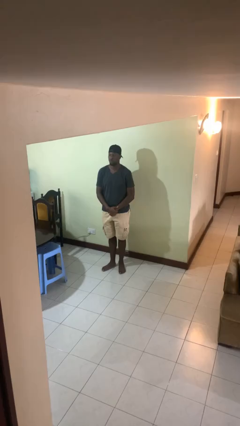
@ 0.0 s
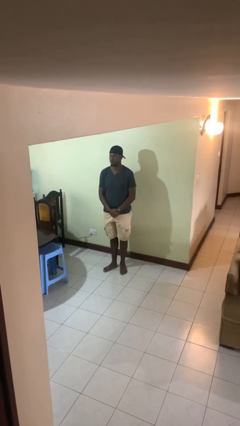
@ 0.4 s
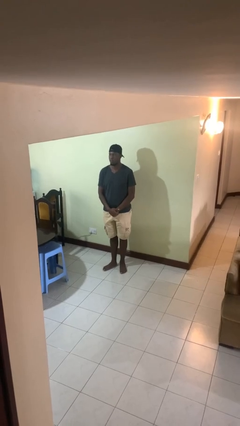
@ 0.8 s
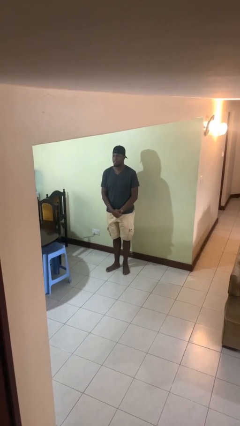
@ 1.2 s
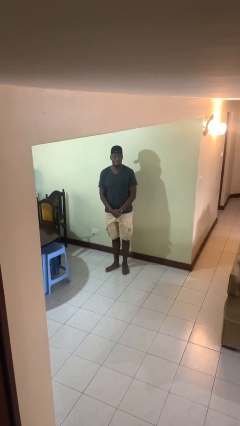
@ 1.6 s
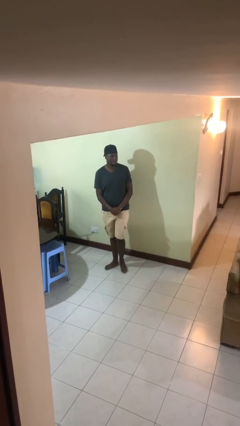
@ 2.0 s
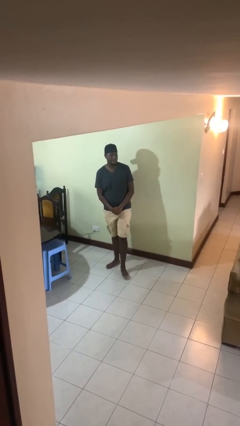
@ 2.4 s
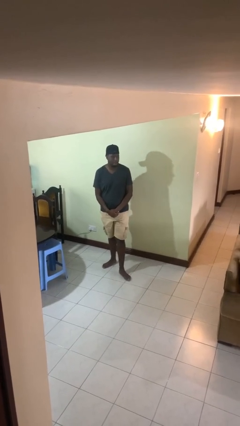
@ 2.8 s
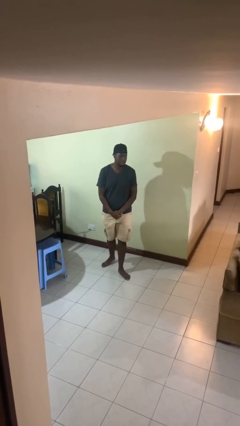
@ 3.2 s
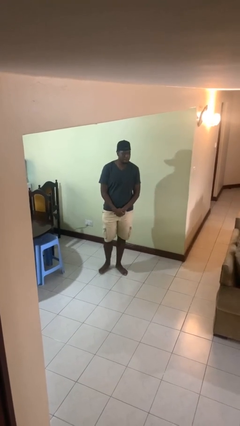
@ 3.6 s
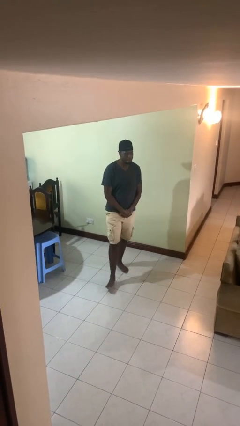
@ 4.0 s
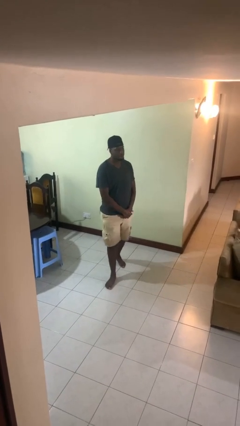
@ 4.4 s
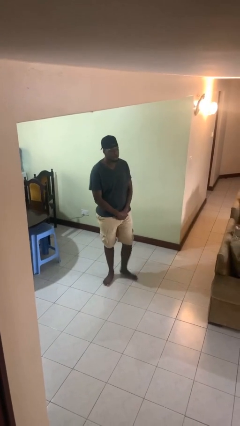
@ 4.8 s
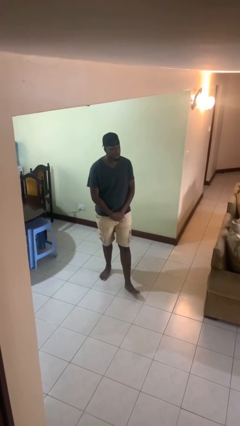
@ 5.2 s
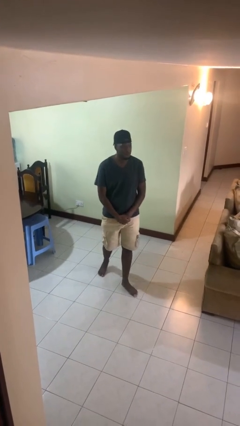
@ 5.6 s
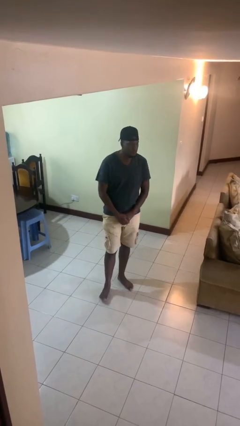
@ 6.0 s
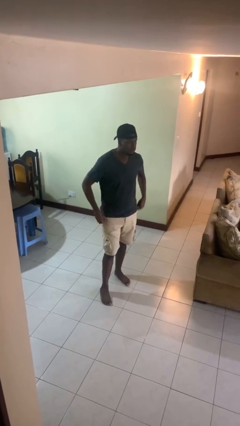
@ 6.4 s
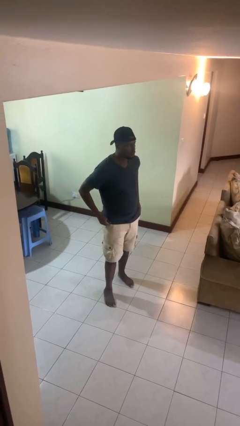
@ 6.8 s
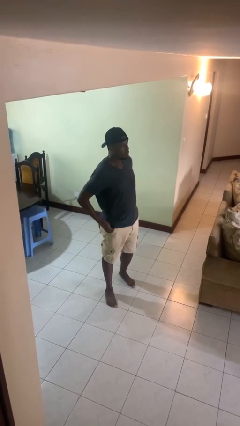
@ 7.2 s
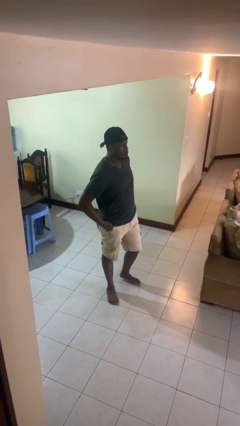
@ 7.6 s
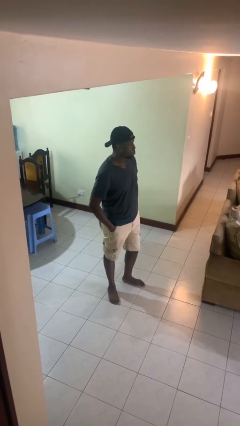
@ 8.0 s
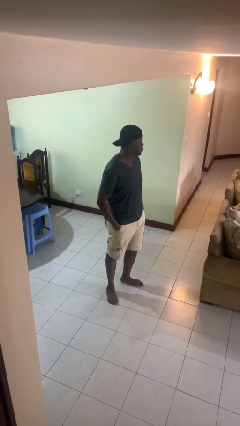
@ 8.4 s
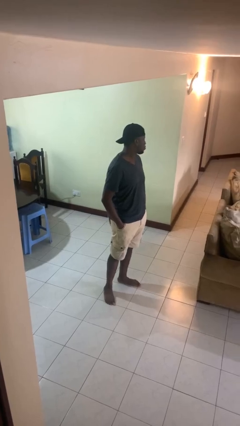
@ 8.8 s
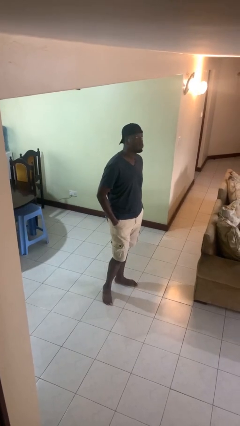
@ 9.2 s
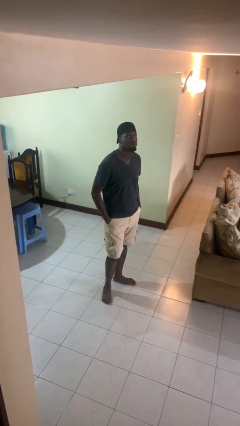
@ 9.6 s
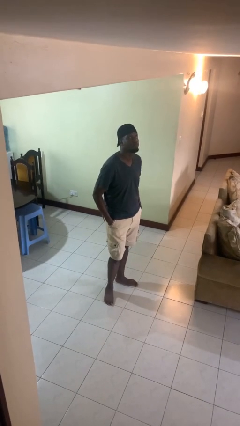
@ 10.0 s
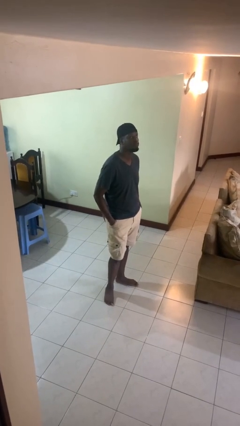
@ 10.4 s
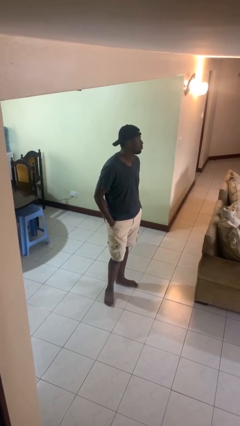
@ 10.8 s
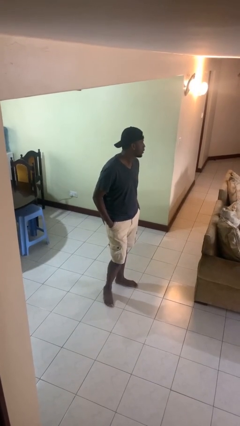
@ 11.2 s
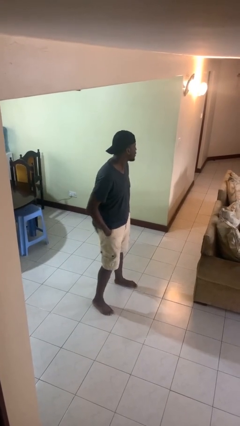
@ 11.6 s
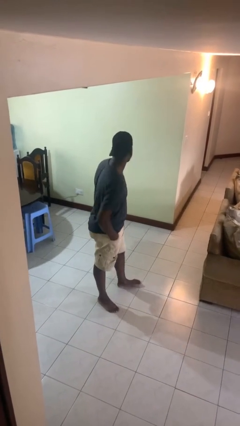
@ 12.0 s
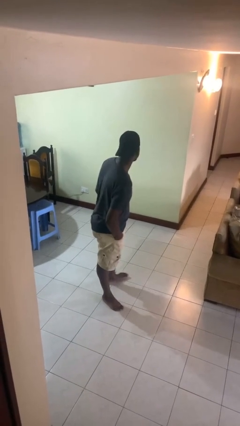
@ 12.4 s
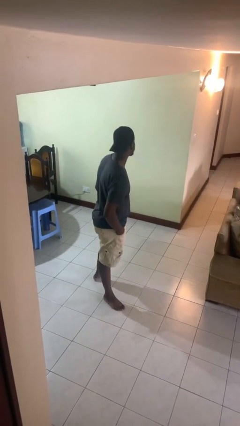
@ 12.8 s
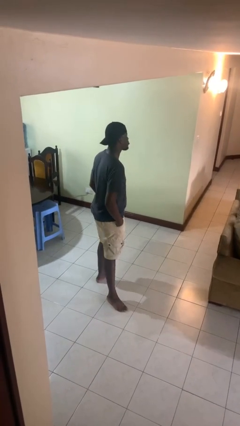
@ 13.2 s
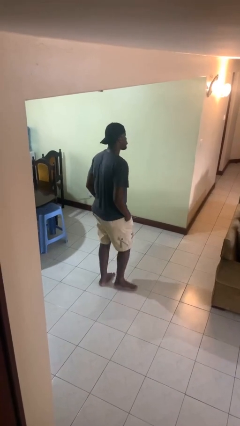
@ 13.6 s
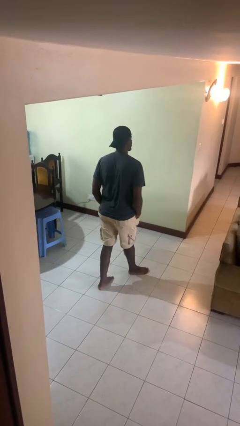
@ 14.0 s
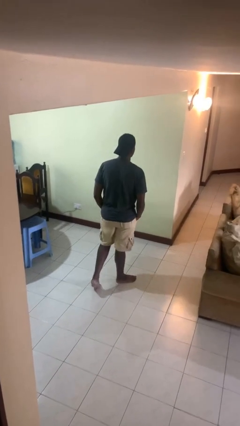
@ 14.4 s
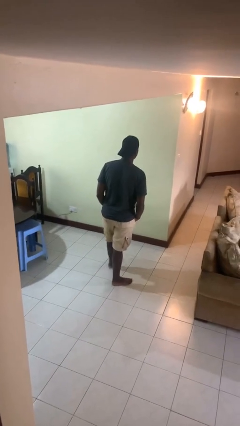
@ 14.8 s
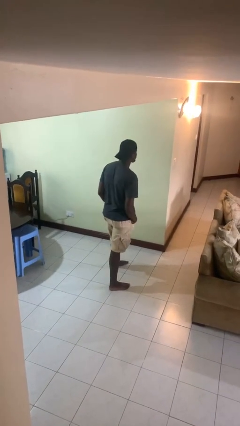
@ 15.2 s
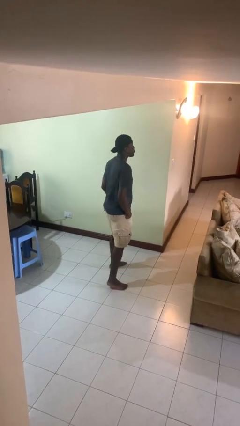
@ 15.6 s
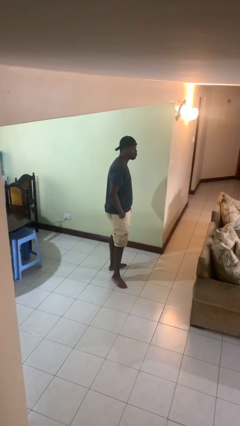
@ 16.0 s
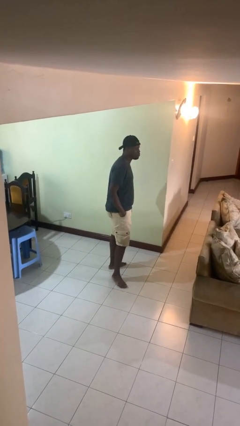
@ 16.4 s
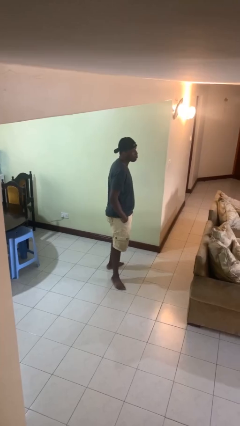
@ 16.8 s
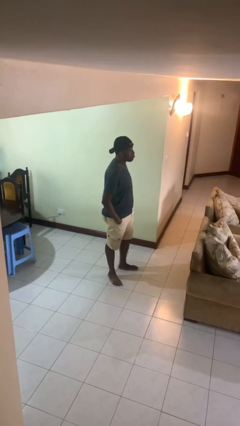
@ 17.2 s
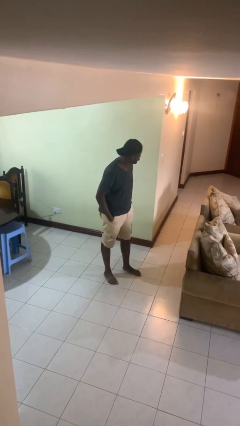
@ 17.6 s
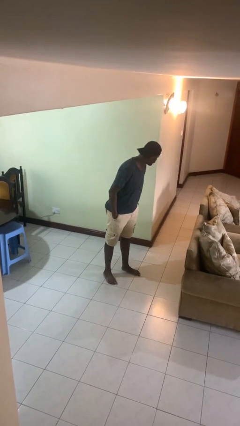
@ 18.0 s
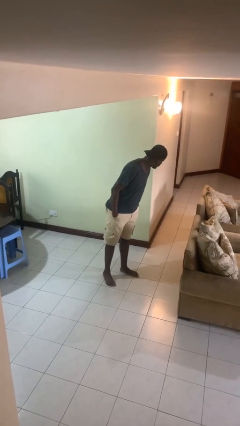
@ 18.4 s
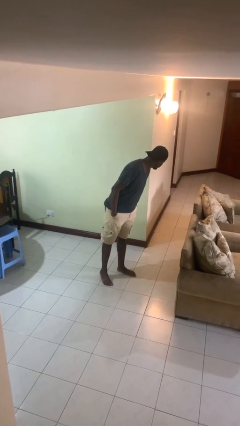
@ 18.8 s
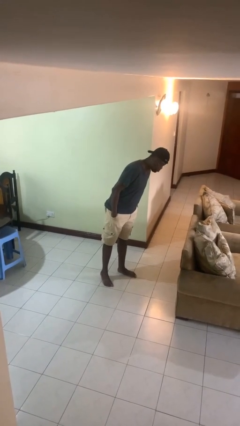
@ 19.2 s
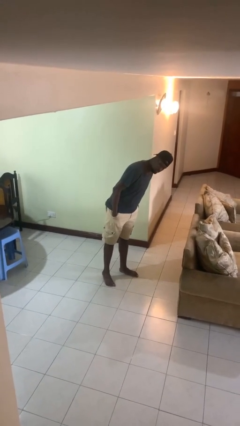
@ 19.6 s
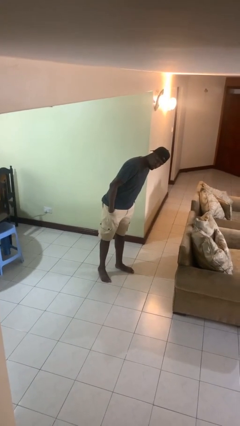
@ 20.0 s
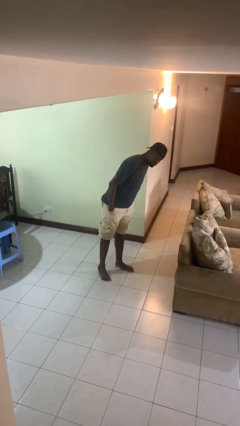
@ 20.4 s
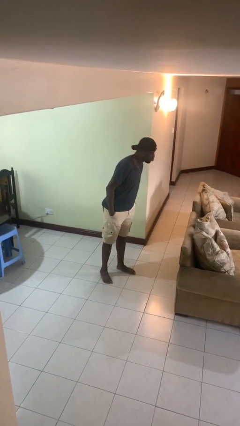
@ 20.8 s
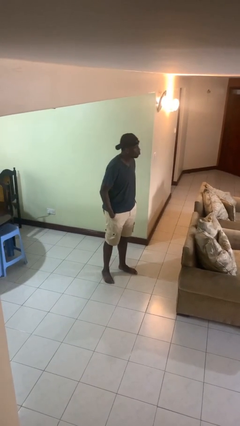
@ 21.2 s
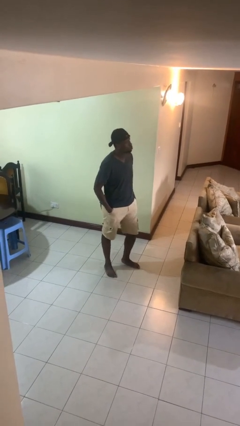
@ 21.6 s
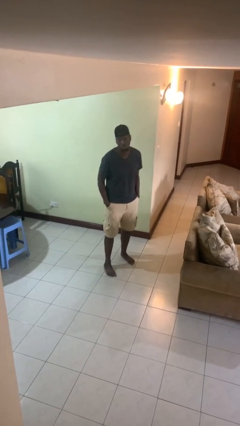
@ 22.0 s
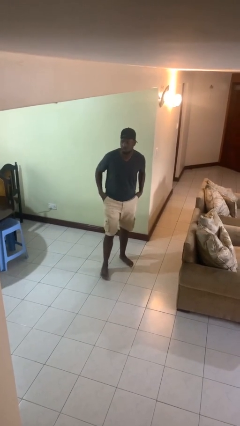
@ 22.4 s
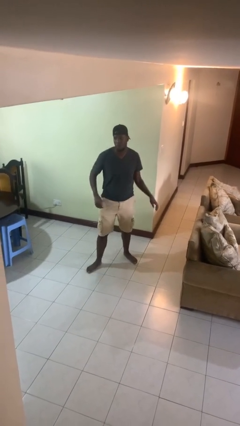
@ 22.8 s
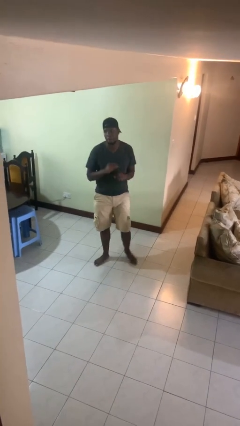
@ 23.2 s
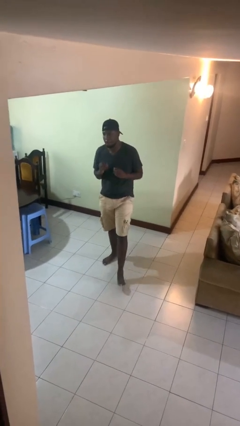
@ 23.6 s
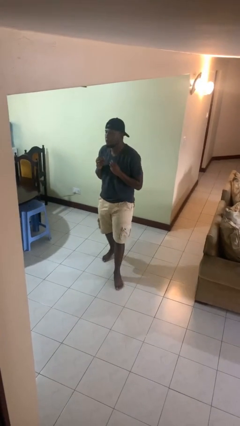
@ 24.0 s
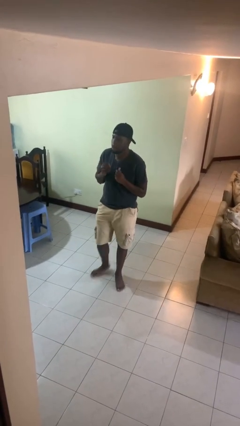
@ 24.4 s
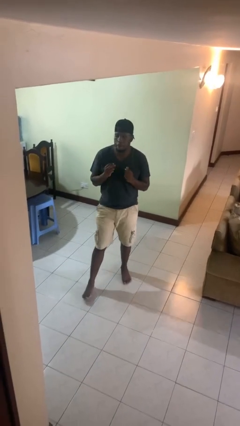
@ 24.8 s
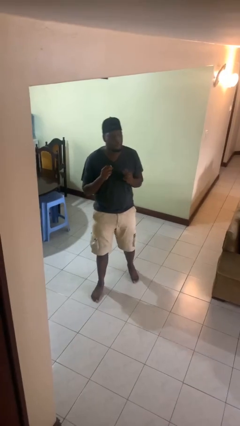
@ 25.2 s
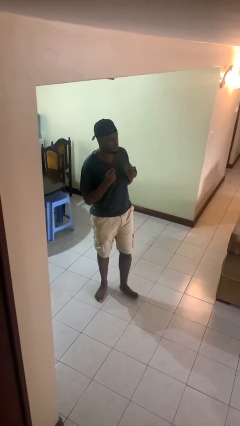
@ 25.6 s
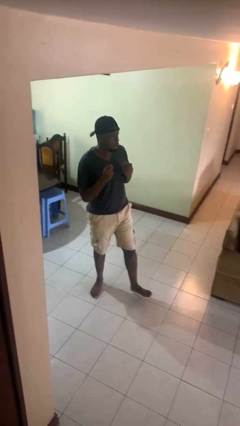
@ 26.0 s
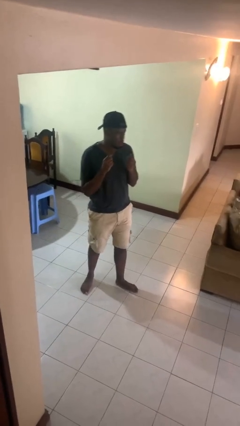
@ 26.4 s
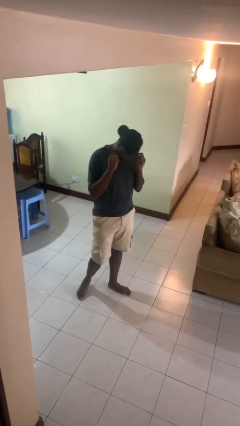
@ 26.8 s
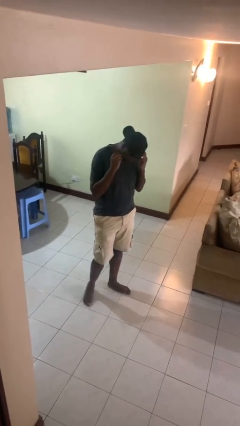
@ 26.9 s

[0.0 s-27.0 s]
person walks

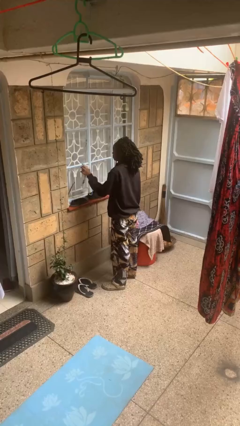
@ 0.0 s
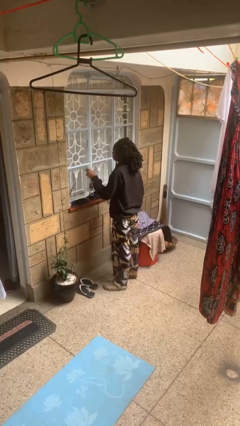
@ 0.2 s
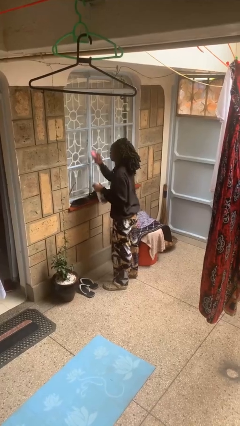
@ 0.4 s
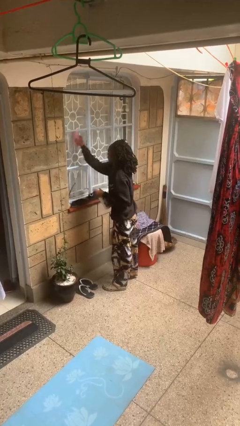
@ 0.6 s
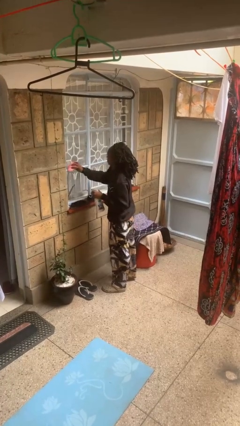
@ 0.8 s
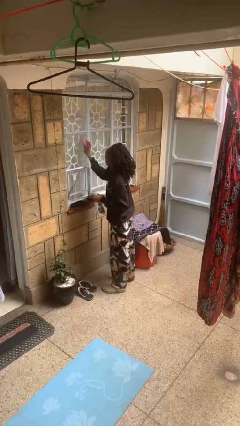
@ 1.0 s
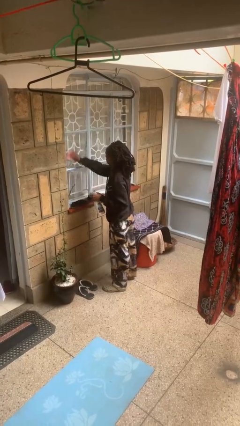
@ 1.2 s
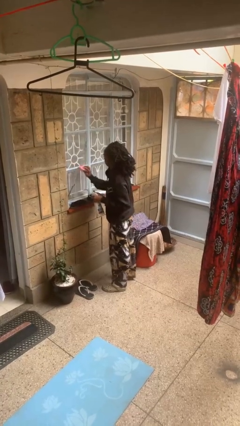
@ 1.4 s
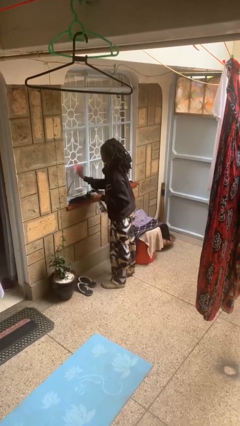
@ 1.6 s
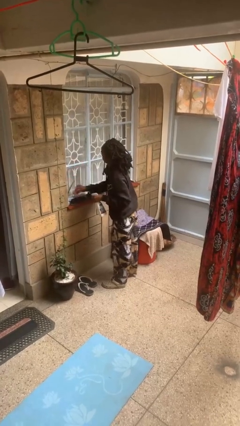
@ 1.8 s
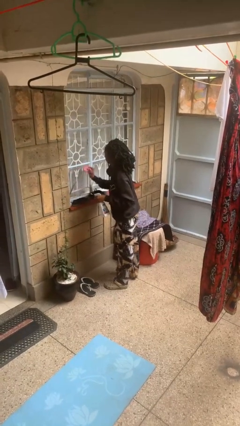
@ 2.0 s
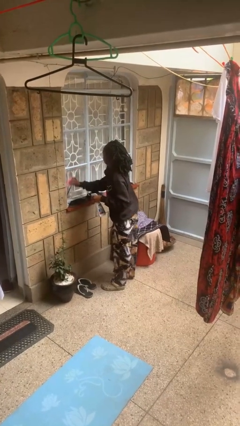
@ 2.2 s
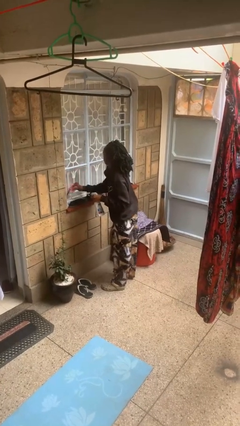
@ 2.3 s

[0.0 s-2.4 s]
person washes window

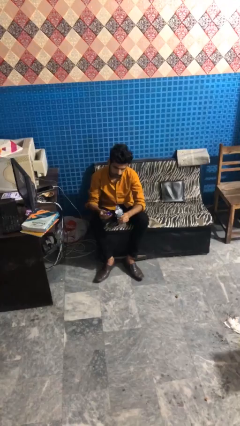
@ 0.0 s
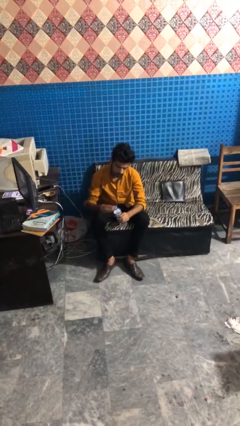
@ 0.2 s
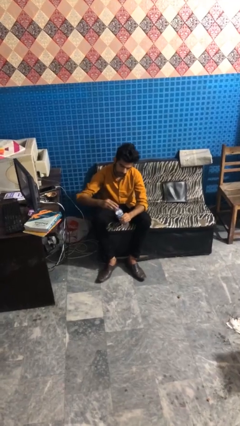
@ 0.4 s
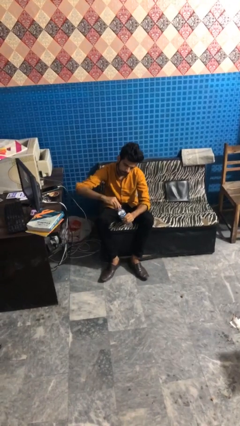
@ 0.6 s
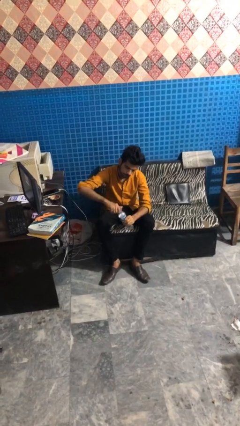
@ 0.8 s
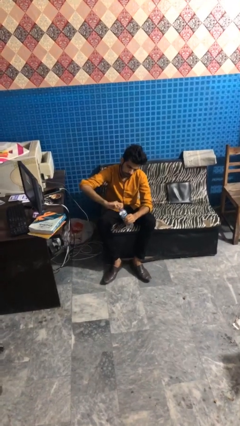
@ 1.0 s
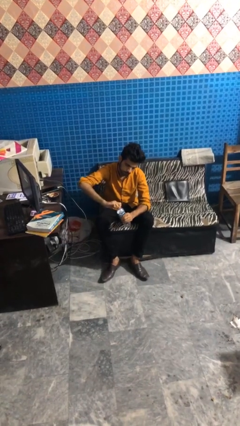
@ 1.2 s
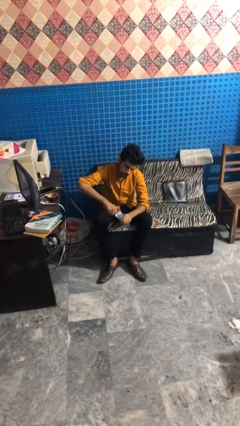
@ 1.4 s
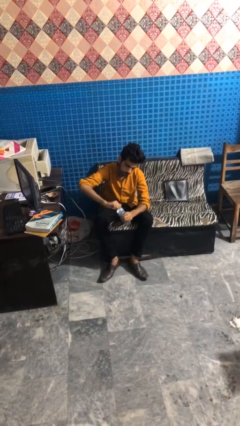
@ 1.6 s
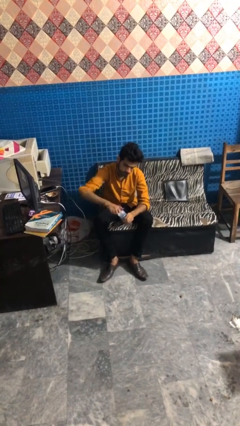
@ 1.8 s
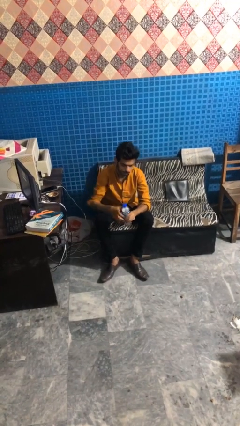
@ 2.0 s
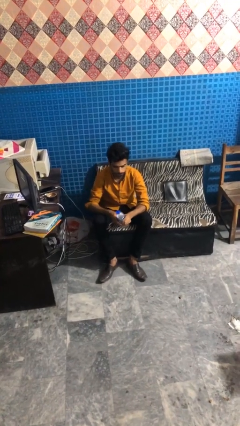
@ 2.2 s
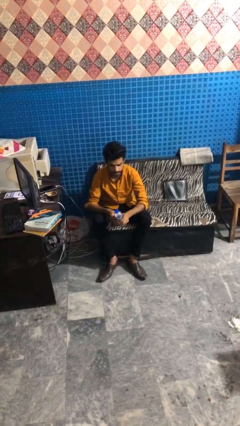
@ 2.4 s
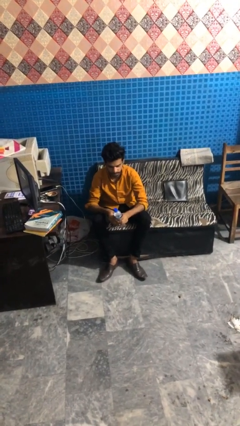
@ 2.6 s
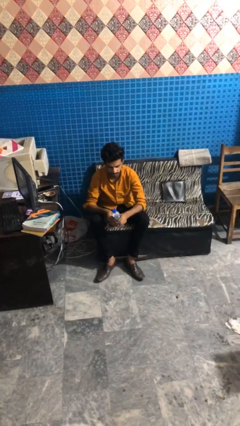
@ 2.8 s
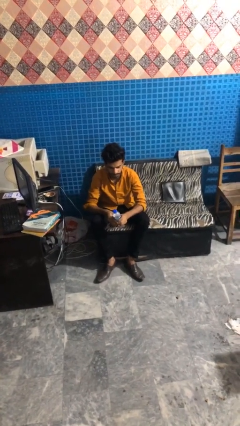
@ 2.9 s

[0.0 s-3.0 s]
person screws lid to bottle
